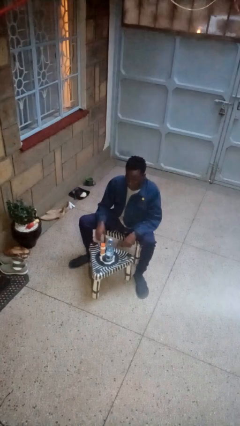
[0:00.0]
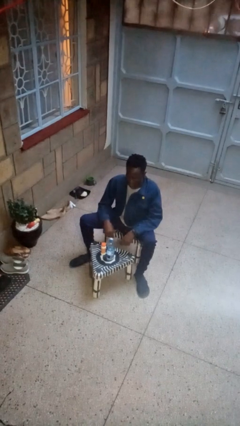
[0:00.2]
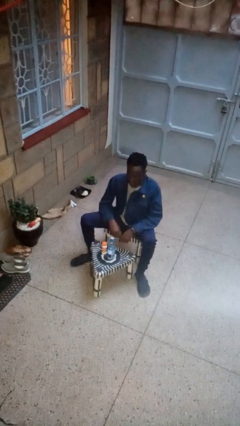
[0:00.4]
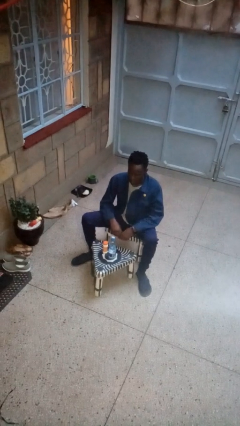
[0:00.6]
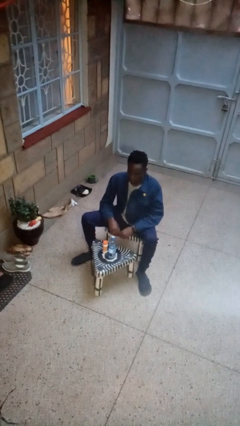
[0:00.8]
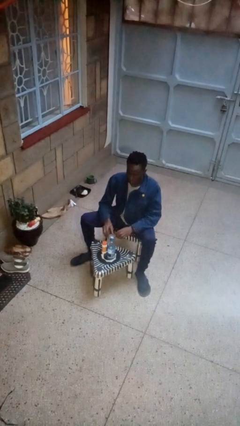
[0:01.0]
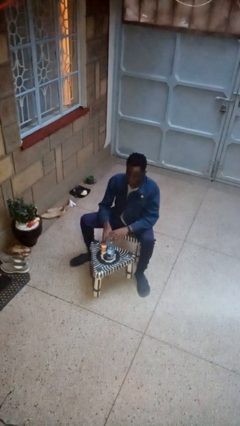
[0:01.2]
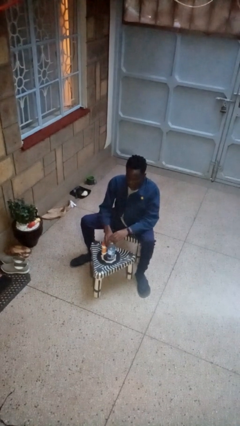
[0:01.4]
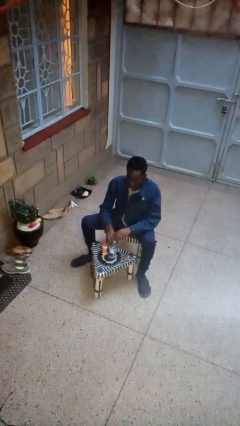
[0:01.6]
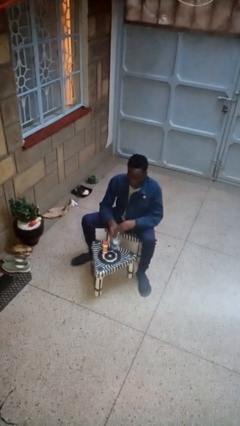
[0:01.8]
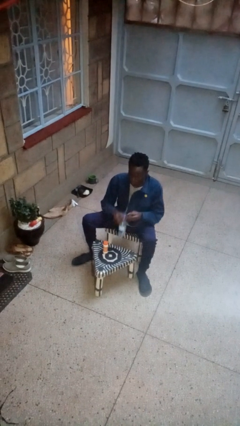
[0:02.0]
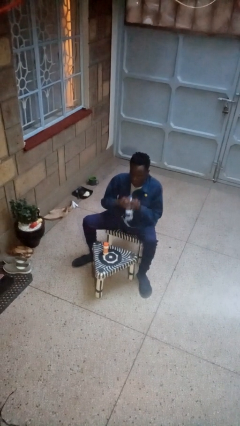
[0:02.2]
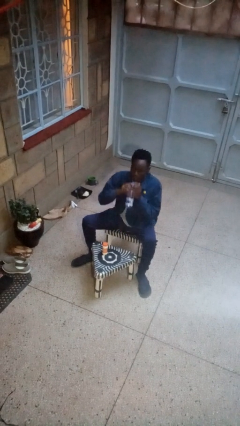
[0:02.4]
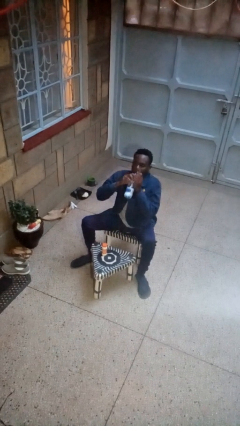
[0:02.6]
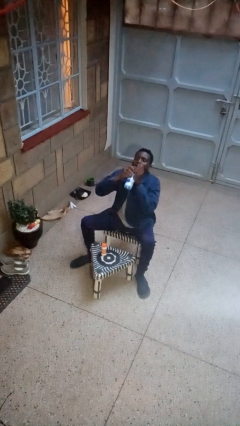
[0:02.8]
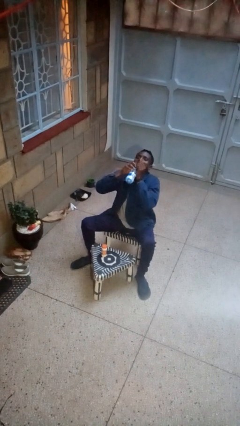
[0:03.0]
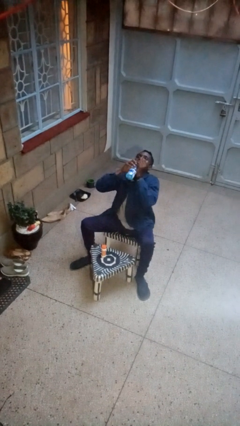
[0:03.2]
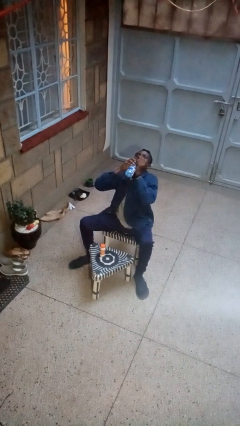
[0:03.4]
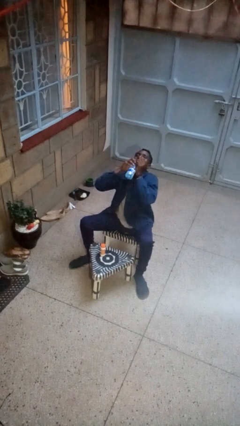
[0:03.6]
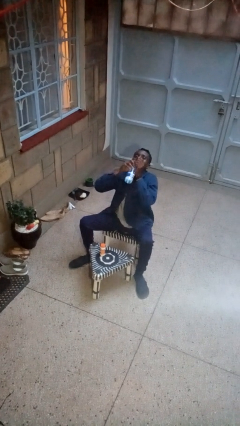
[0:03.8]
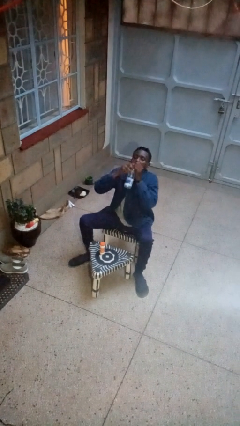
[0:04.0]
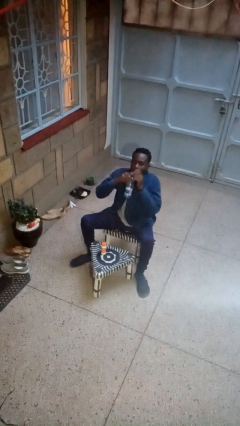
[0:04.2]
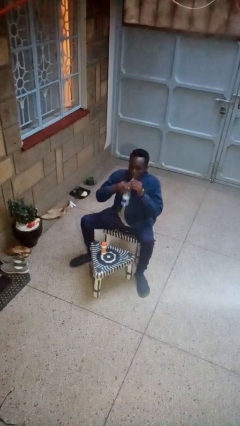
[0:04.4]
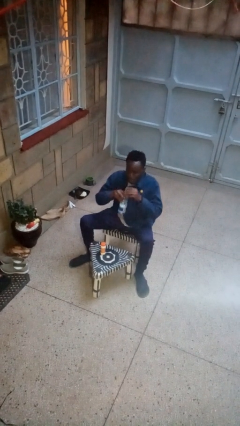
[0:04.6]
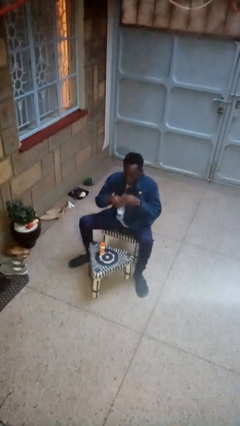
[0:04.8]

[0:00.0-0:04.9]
person drinks from cup

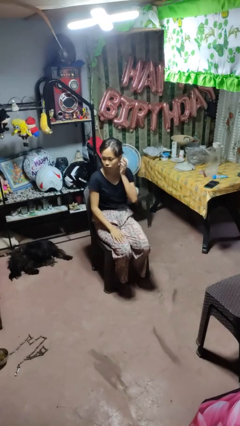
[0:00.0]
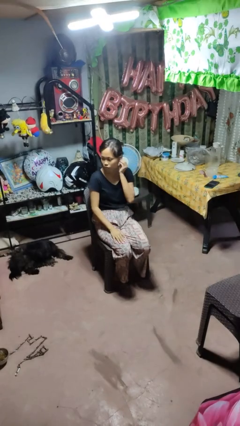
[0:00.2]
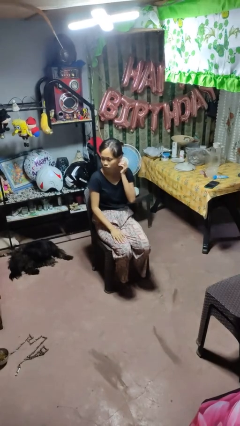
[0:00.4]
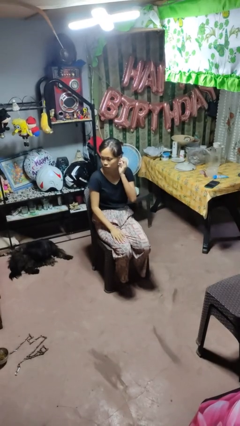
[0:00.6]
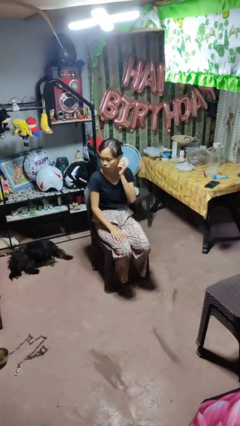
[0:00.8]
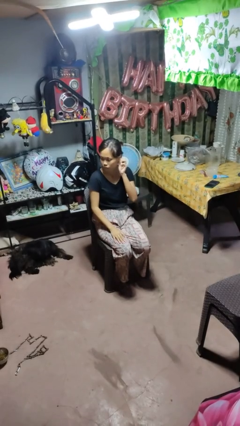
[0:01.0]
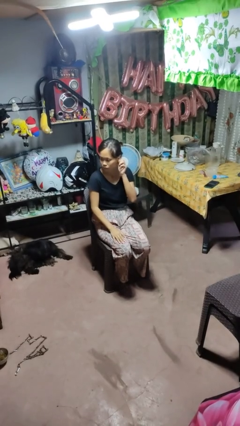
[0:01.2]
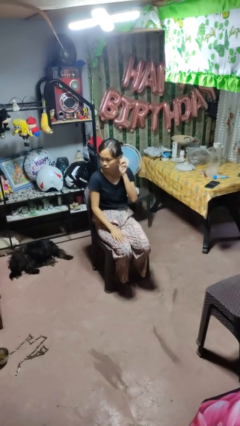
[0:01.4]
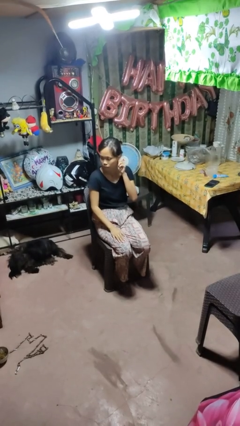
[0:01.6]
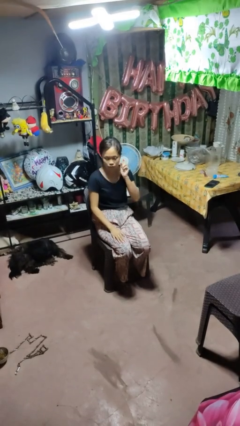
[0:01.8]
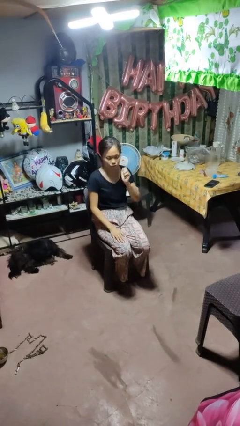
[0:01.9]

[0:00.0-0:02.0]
person touches earlobe

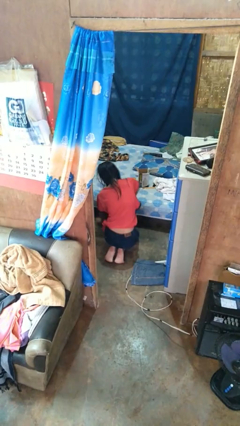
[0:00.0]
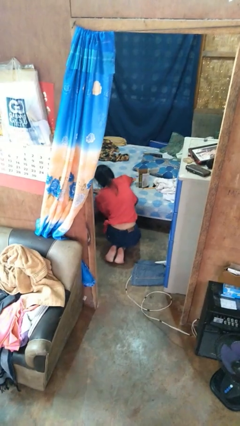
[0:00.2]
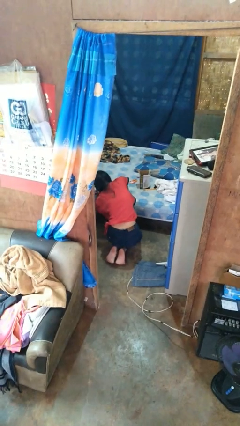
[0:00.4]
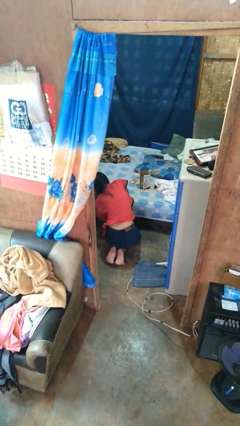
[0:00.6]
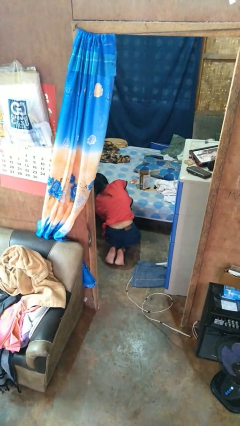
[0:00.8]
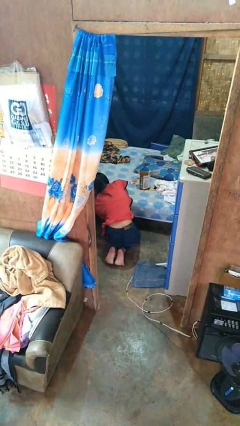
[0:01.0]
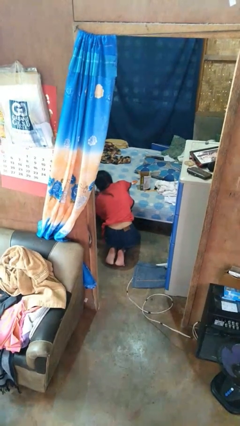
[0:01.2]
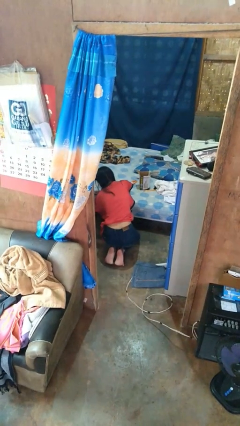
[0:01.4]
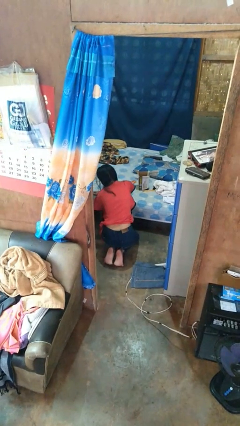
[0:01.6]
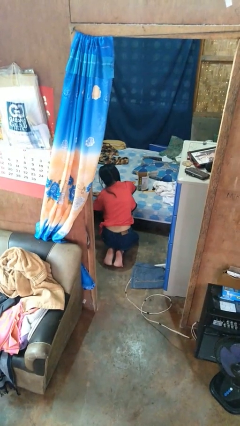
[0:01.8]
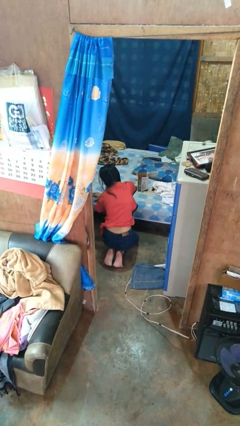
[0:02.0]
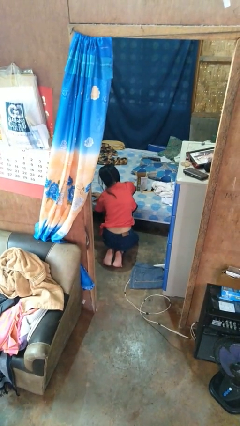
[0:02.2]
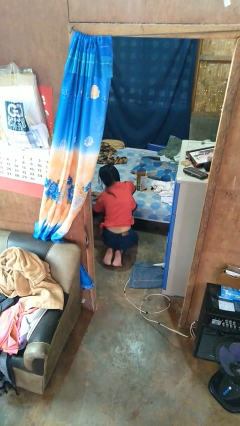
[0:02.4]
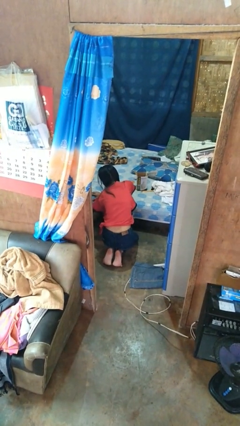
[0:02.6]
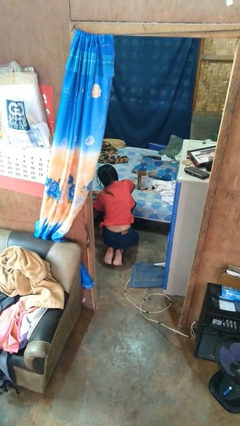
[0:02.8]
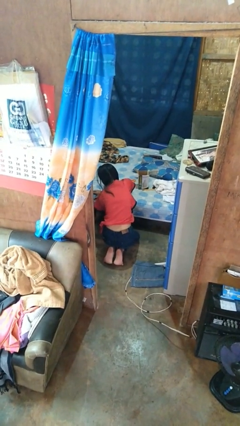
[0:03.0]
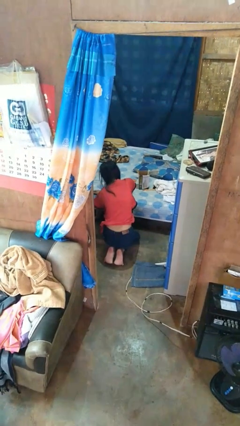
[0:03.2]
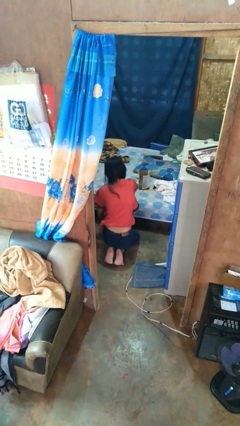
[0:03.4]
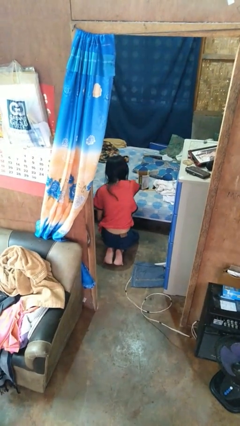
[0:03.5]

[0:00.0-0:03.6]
person searches under bed

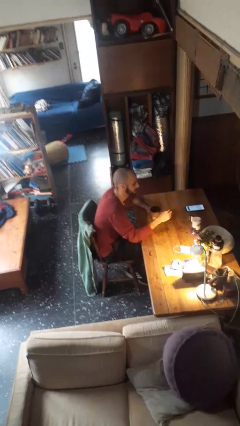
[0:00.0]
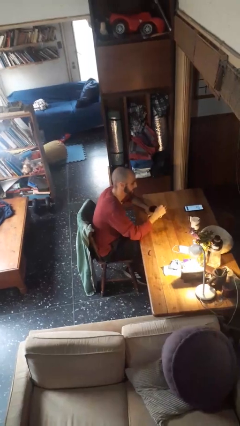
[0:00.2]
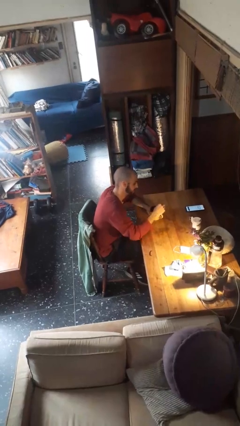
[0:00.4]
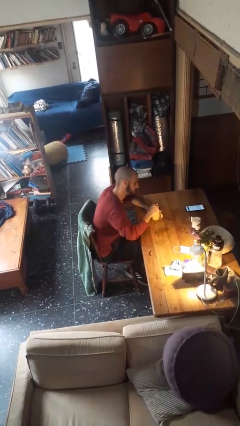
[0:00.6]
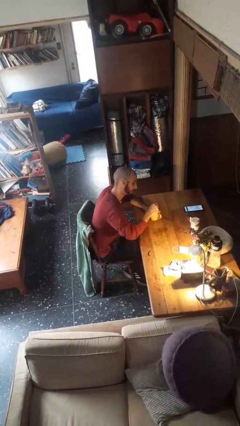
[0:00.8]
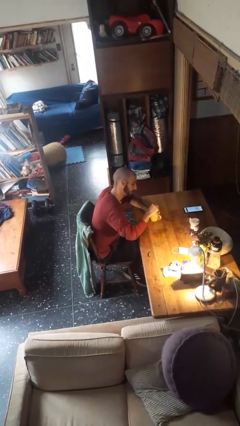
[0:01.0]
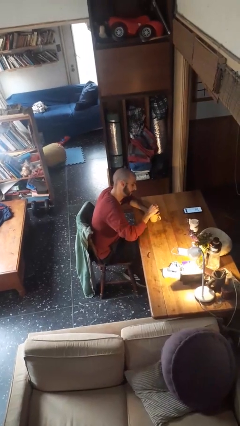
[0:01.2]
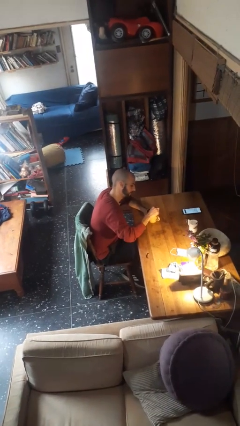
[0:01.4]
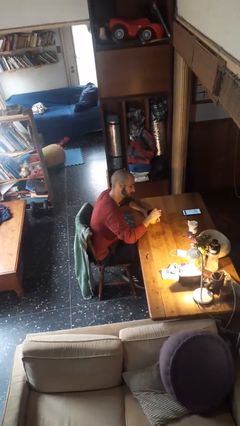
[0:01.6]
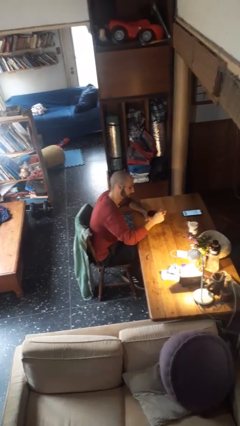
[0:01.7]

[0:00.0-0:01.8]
person stirs mug

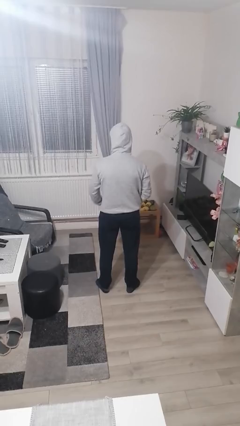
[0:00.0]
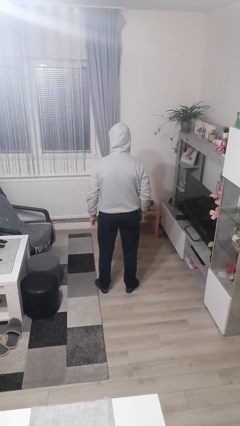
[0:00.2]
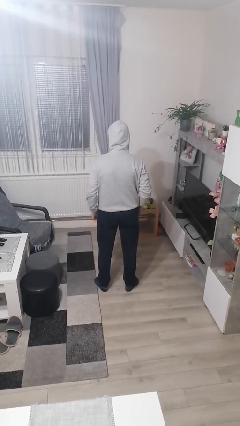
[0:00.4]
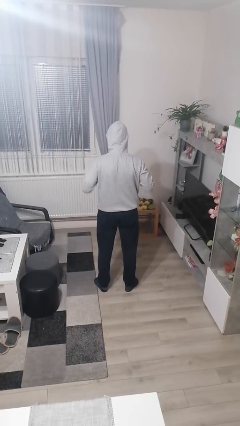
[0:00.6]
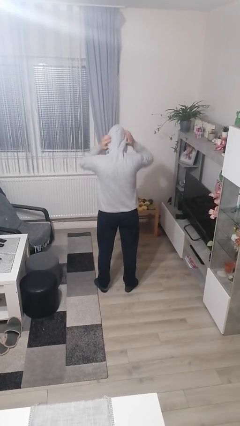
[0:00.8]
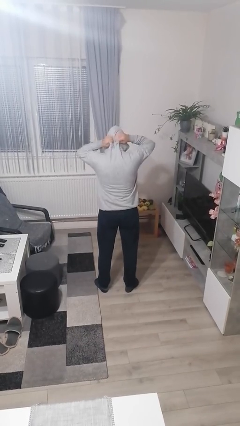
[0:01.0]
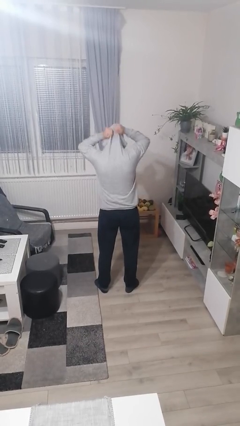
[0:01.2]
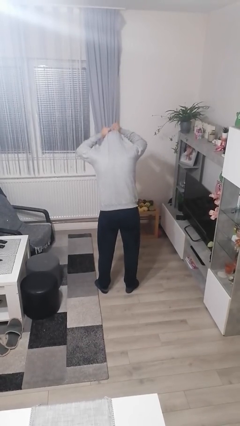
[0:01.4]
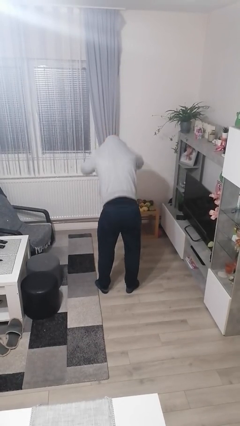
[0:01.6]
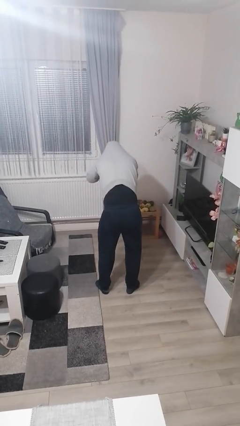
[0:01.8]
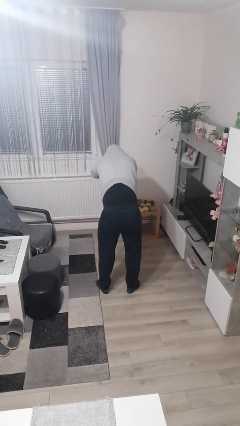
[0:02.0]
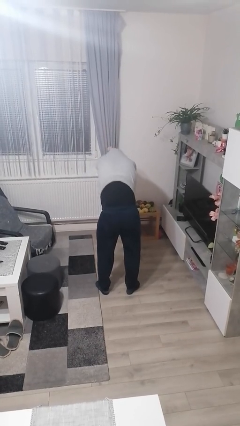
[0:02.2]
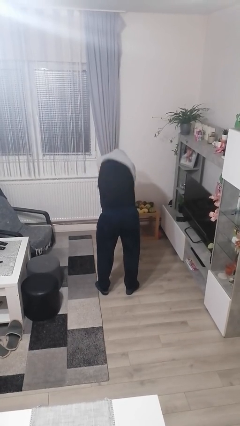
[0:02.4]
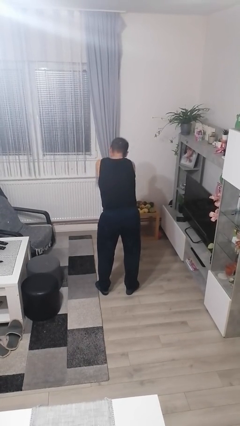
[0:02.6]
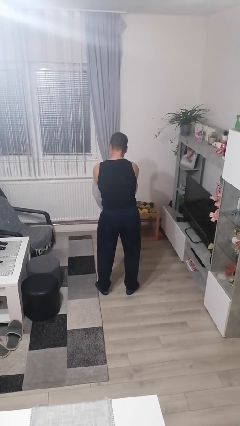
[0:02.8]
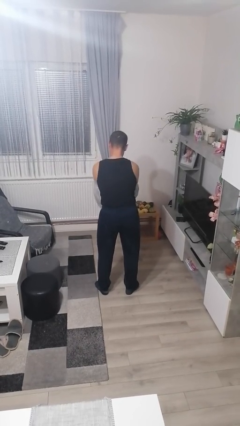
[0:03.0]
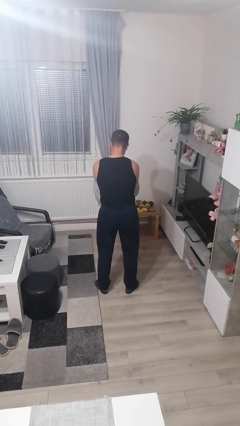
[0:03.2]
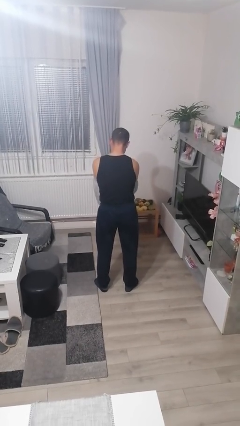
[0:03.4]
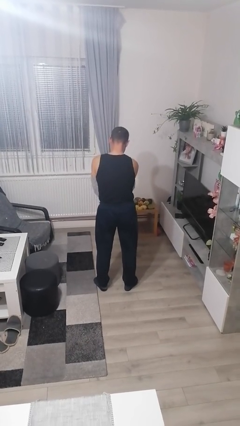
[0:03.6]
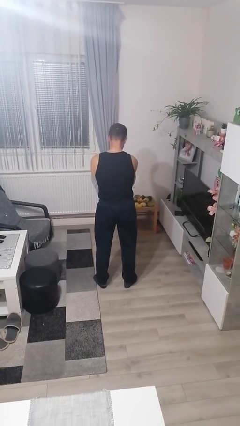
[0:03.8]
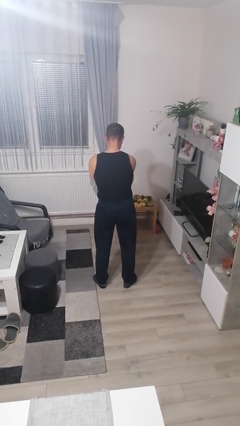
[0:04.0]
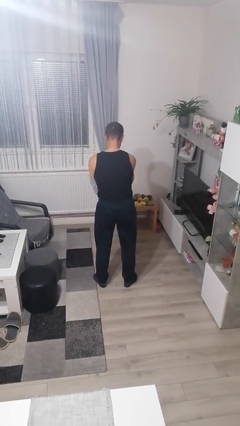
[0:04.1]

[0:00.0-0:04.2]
person takes off hoodie

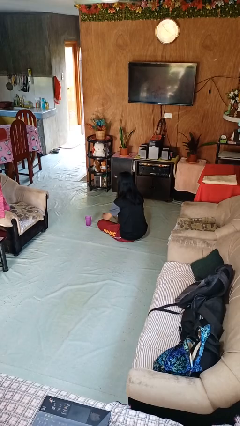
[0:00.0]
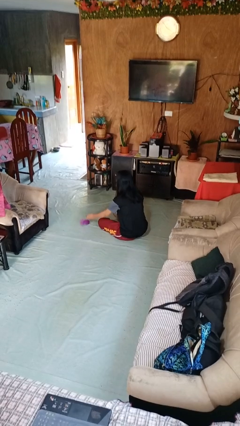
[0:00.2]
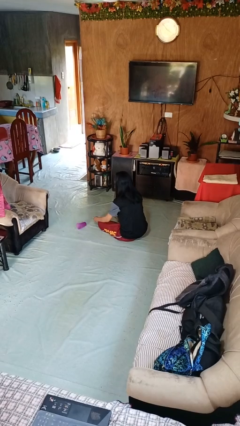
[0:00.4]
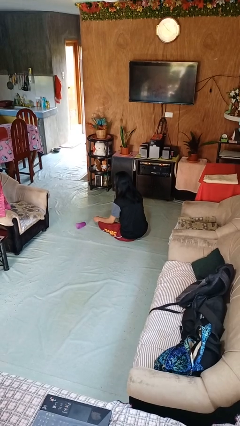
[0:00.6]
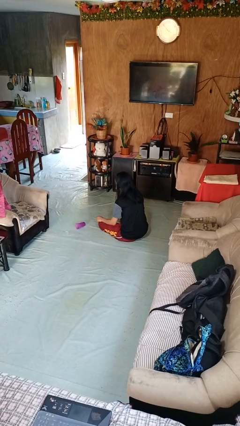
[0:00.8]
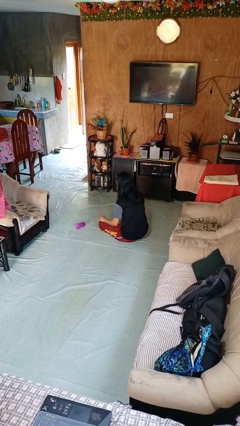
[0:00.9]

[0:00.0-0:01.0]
person spills on floor
